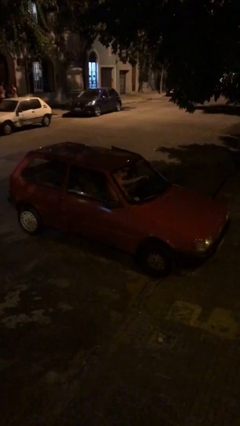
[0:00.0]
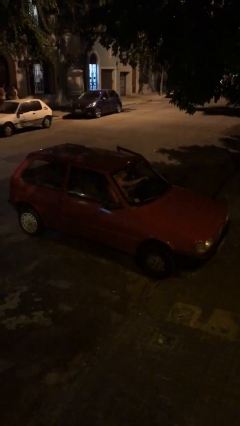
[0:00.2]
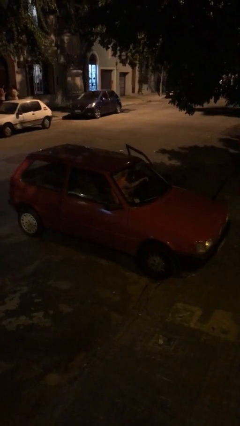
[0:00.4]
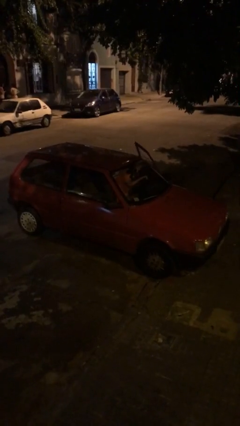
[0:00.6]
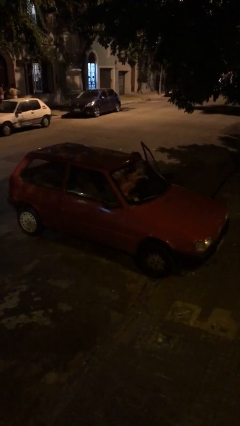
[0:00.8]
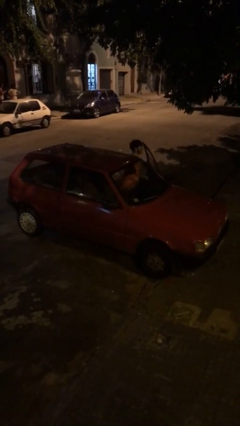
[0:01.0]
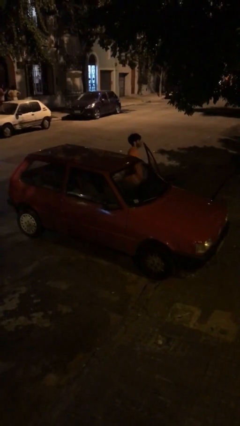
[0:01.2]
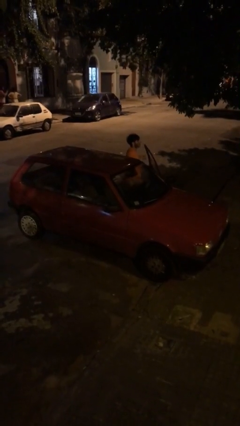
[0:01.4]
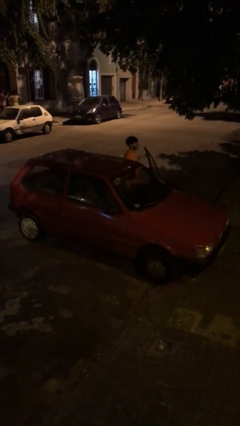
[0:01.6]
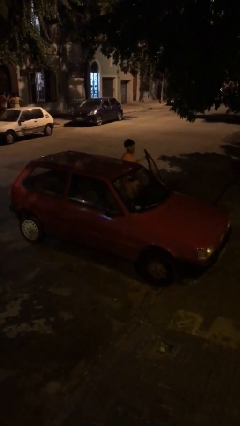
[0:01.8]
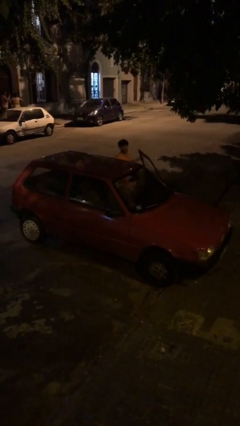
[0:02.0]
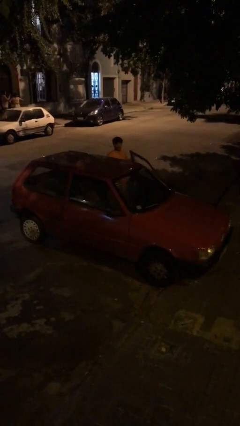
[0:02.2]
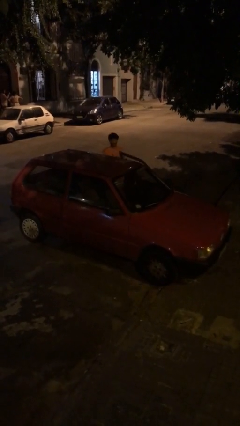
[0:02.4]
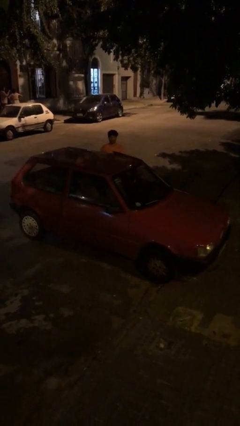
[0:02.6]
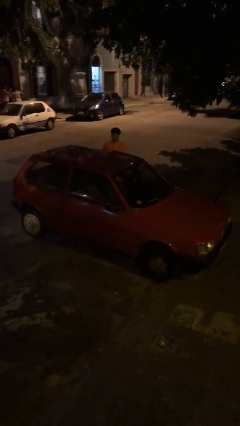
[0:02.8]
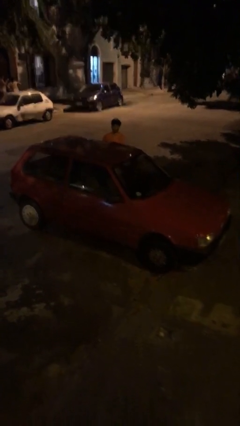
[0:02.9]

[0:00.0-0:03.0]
car drops off person

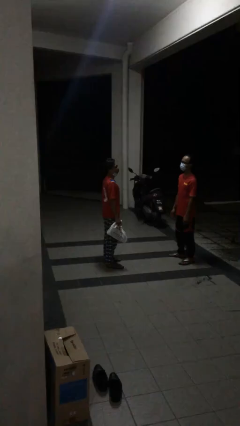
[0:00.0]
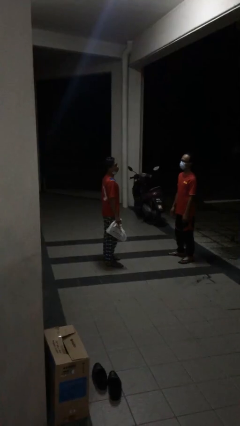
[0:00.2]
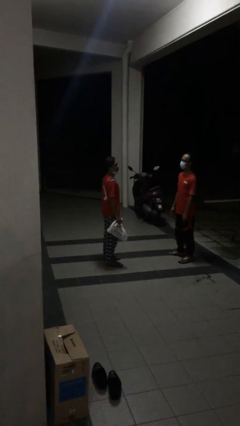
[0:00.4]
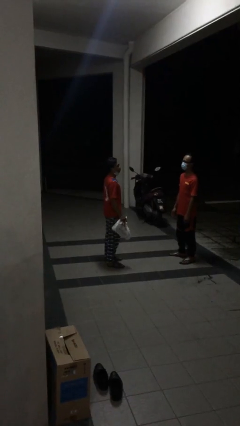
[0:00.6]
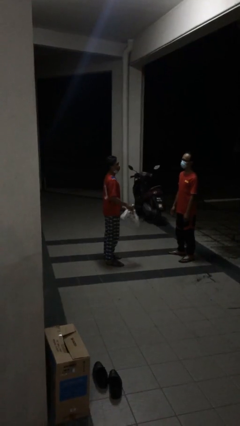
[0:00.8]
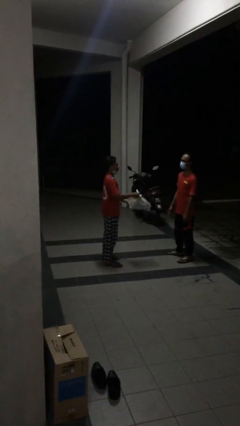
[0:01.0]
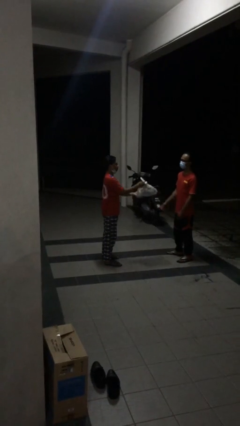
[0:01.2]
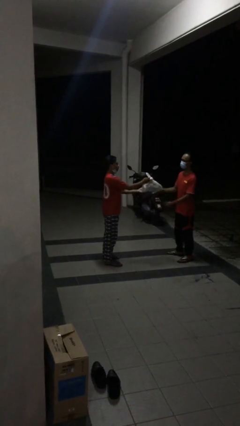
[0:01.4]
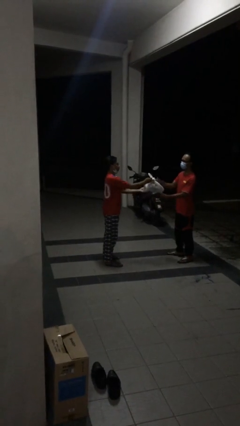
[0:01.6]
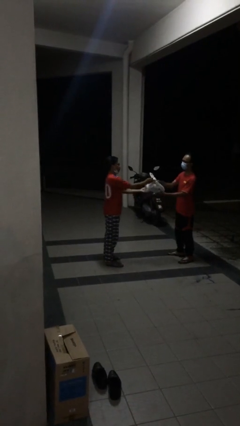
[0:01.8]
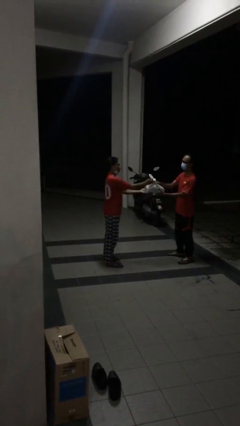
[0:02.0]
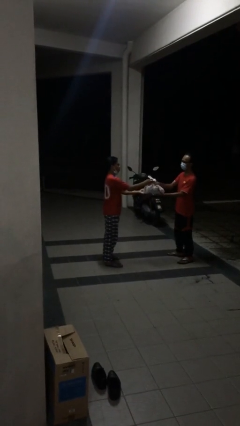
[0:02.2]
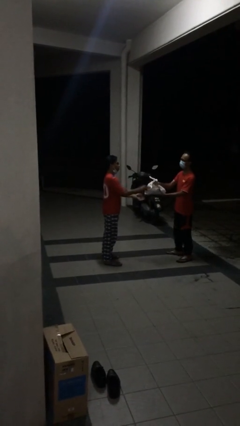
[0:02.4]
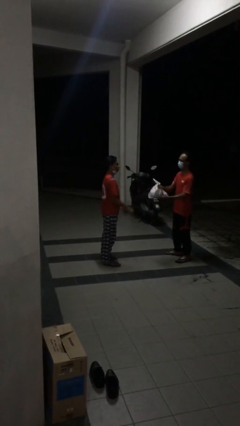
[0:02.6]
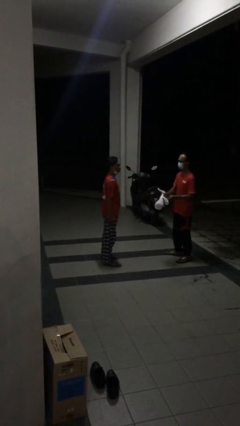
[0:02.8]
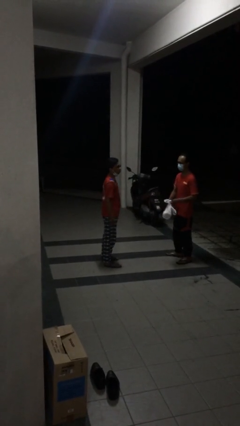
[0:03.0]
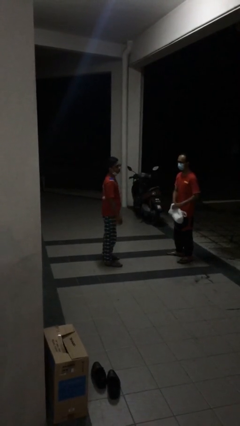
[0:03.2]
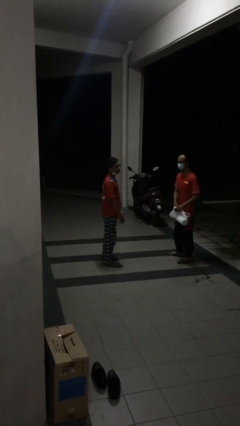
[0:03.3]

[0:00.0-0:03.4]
person transfers object to person

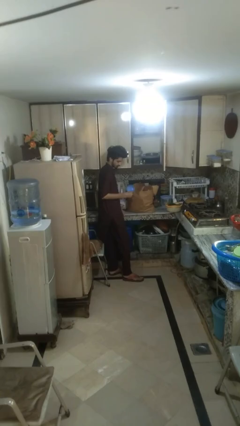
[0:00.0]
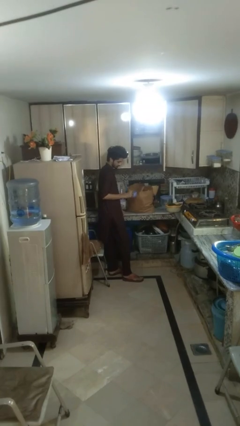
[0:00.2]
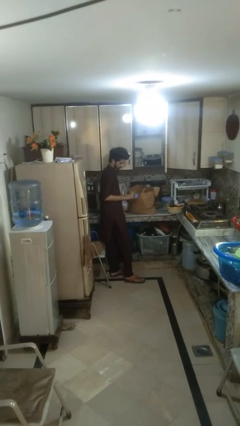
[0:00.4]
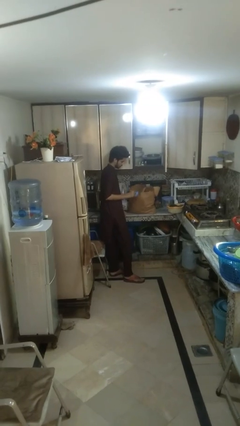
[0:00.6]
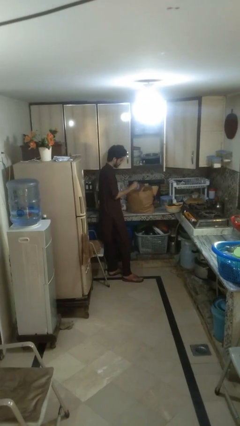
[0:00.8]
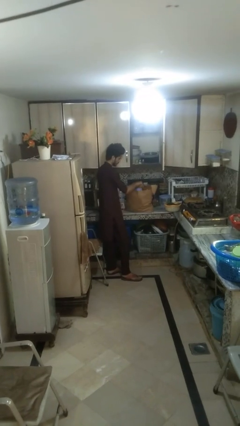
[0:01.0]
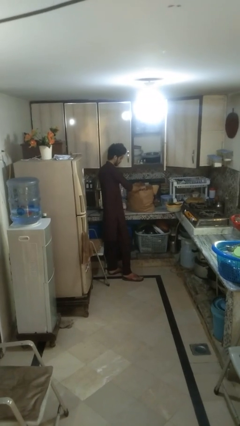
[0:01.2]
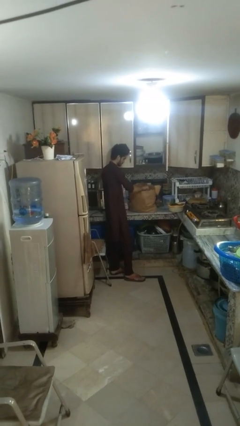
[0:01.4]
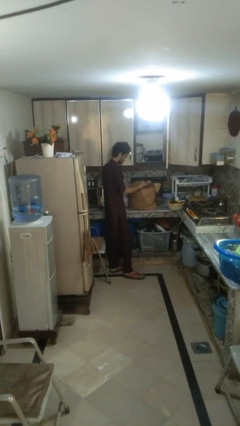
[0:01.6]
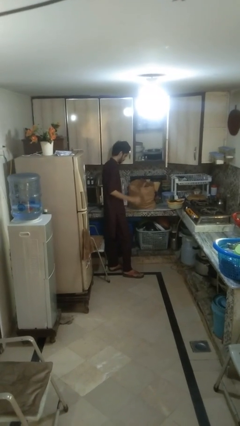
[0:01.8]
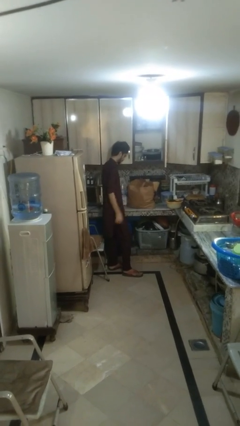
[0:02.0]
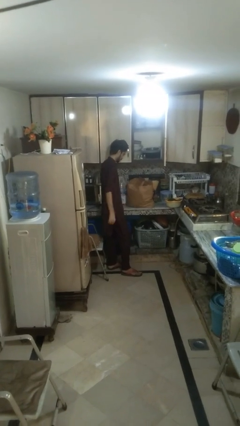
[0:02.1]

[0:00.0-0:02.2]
person puts object into bag

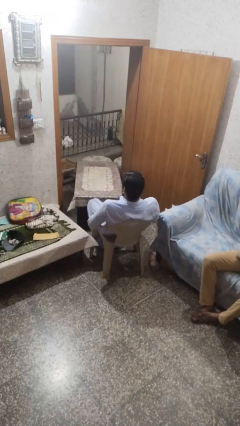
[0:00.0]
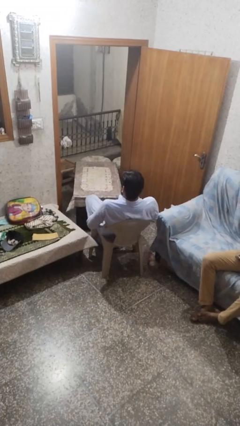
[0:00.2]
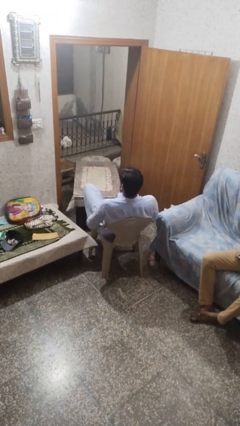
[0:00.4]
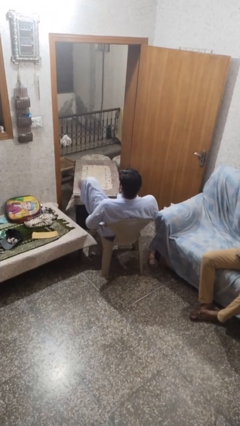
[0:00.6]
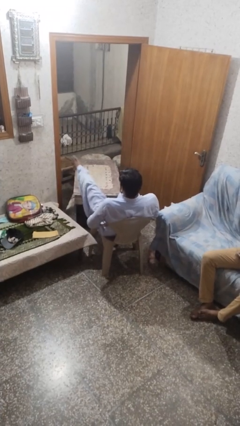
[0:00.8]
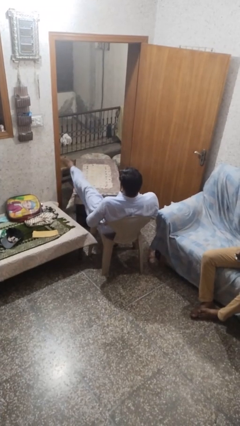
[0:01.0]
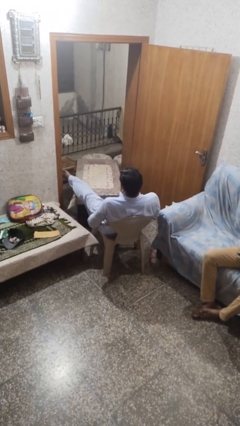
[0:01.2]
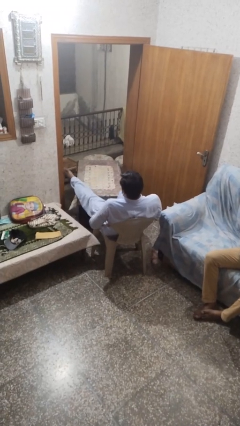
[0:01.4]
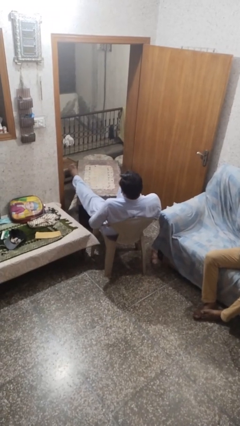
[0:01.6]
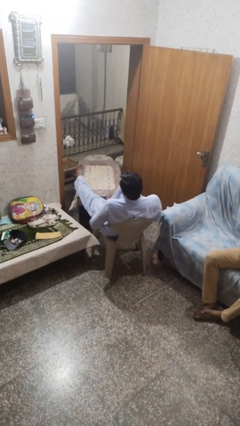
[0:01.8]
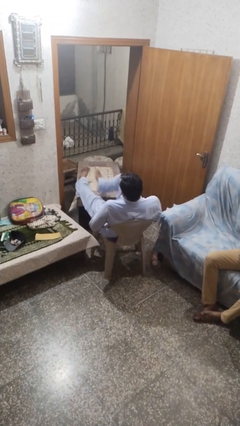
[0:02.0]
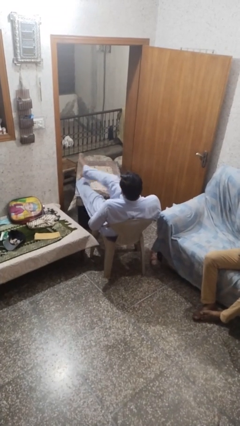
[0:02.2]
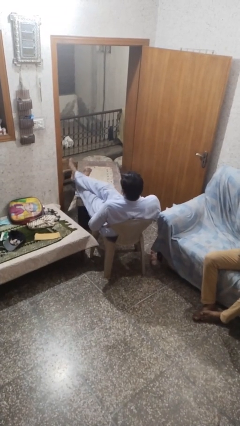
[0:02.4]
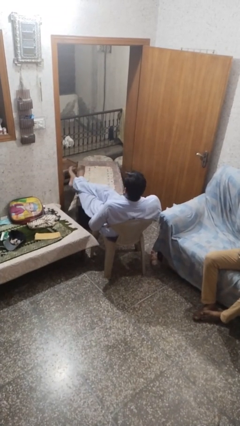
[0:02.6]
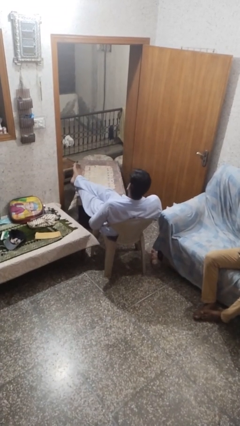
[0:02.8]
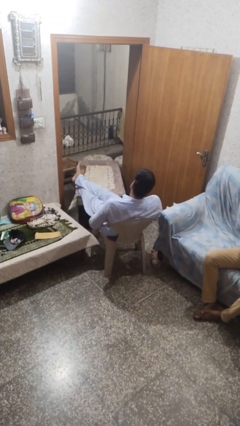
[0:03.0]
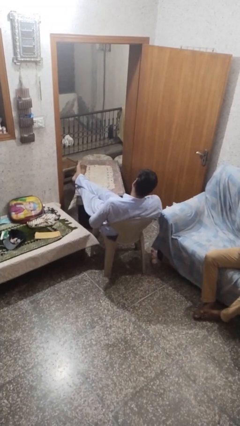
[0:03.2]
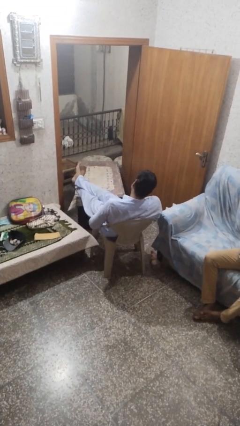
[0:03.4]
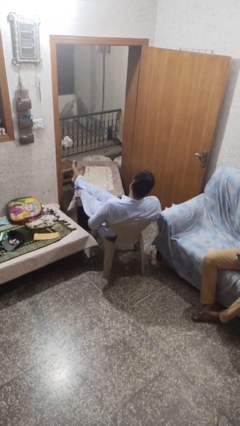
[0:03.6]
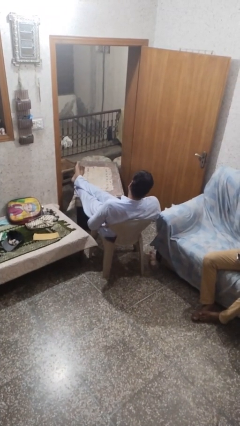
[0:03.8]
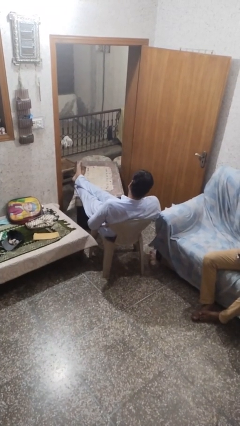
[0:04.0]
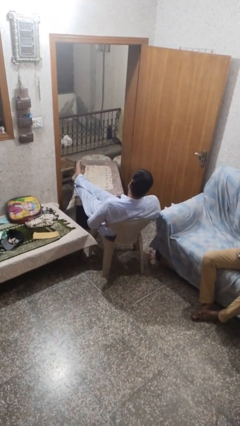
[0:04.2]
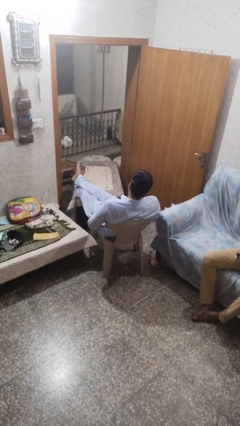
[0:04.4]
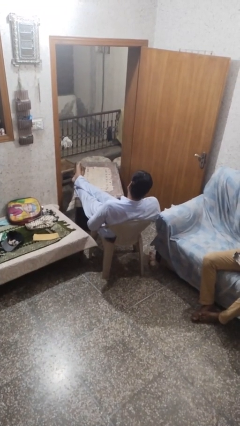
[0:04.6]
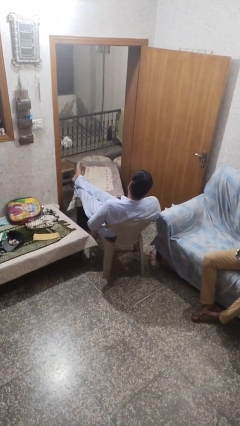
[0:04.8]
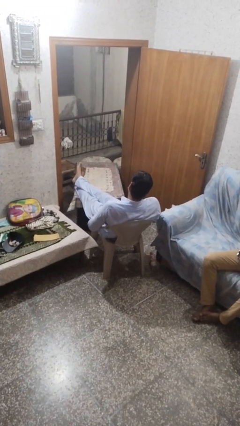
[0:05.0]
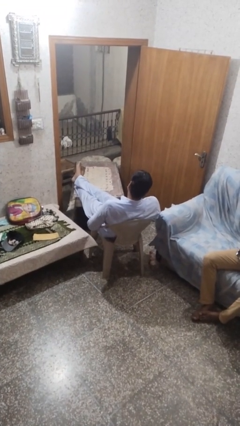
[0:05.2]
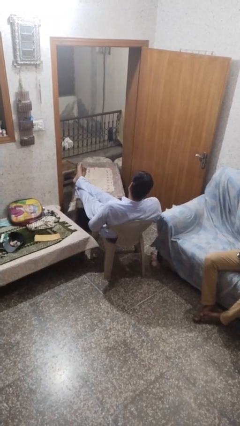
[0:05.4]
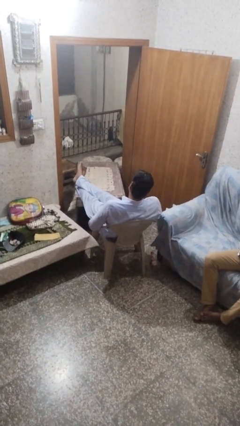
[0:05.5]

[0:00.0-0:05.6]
person puts feet up

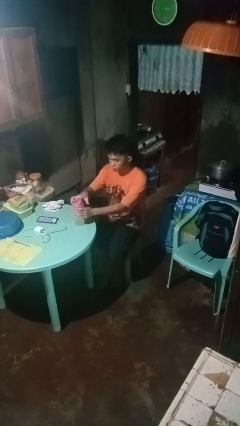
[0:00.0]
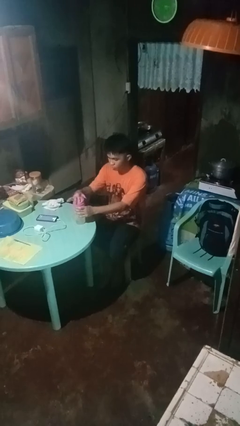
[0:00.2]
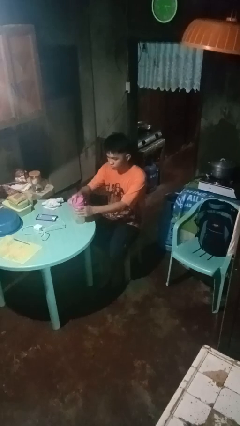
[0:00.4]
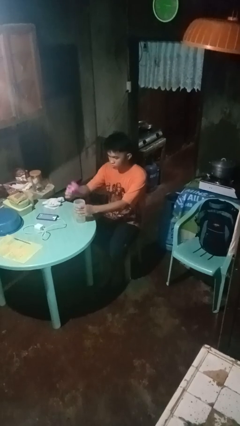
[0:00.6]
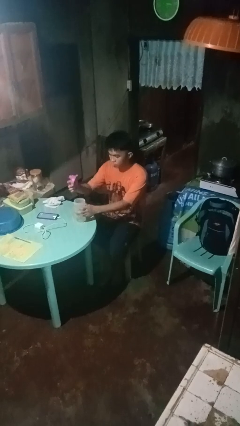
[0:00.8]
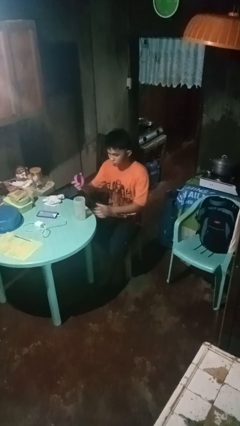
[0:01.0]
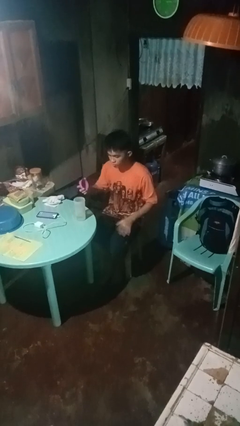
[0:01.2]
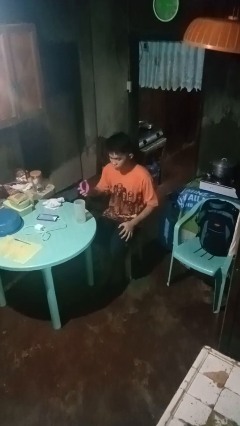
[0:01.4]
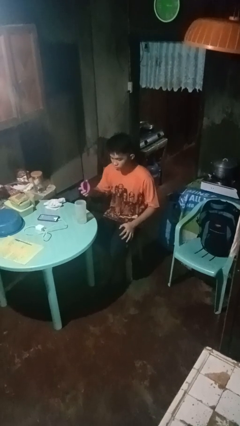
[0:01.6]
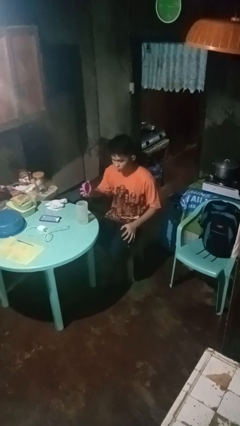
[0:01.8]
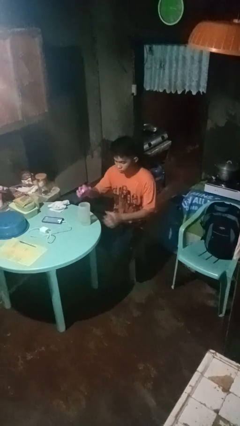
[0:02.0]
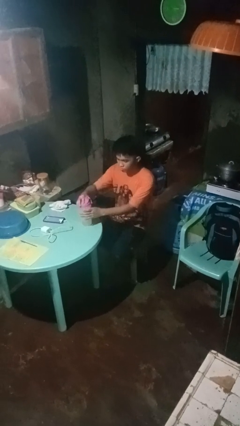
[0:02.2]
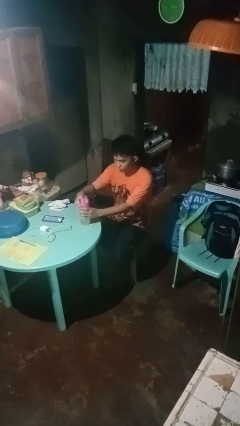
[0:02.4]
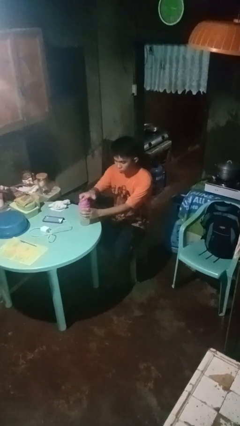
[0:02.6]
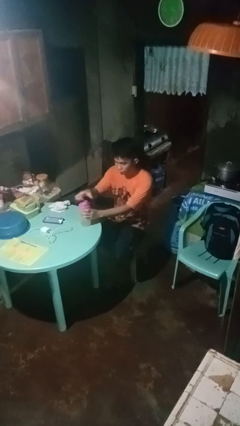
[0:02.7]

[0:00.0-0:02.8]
person unscrews lid from bottle

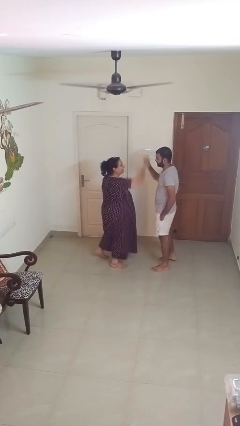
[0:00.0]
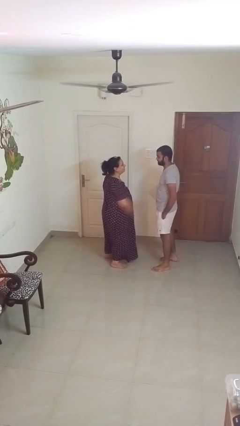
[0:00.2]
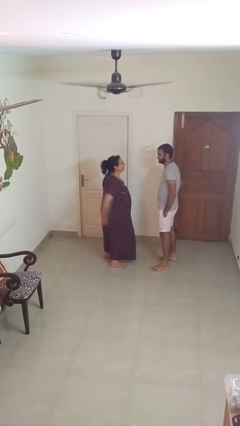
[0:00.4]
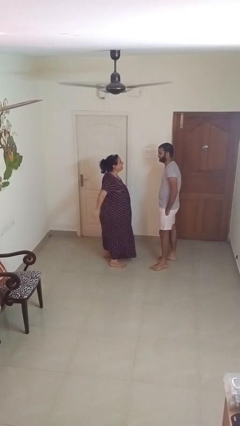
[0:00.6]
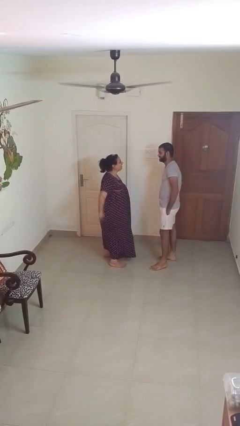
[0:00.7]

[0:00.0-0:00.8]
person highfives hand
